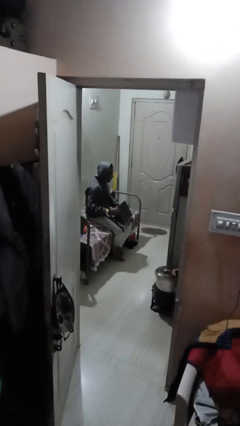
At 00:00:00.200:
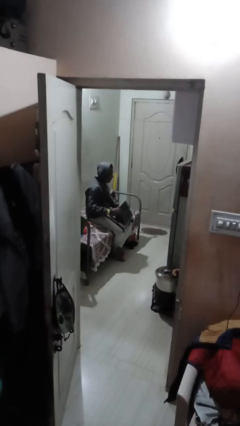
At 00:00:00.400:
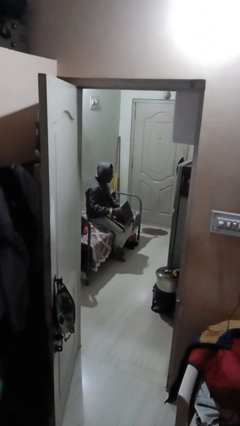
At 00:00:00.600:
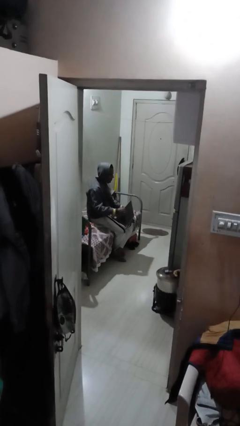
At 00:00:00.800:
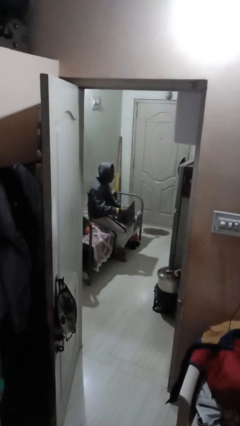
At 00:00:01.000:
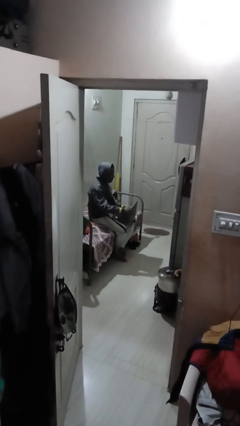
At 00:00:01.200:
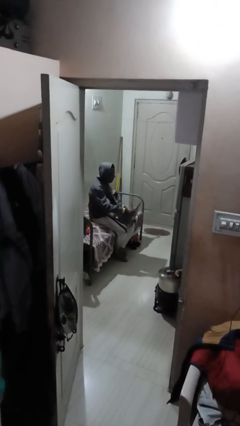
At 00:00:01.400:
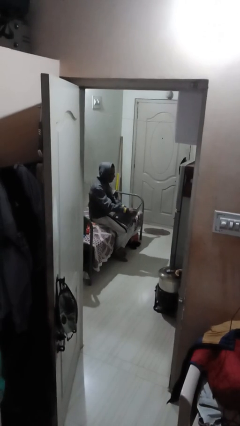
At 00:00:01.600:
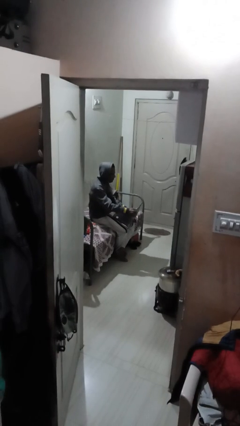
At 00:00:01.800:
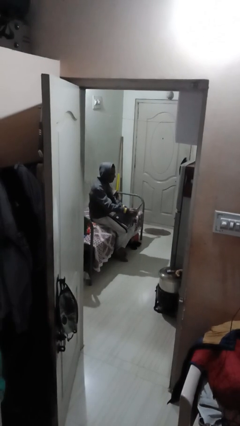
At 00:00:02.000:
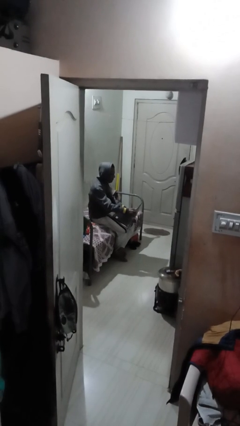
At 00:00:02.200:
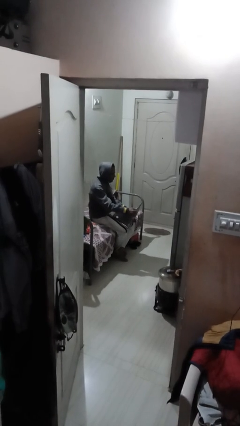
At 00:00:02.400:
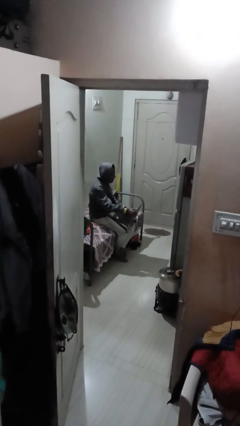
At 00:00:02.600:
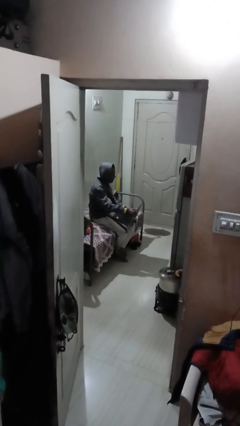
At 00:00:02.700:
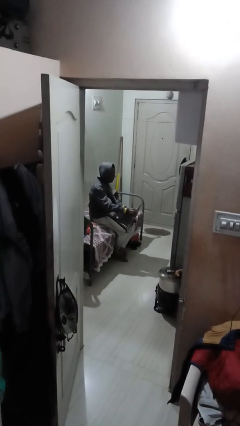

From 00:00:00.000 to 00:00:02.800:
person interacts with laptop

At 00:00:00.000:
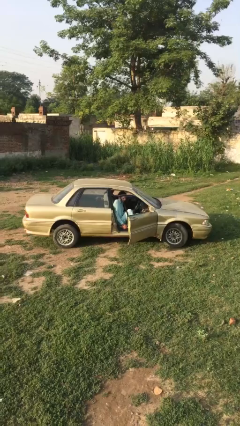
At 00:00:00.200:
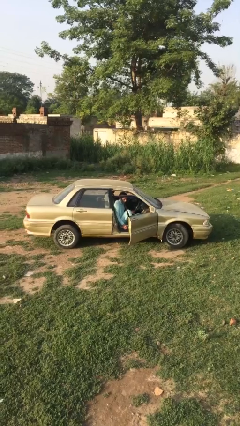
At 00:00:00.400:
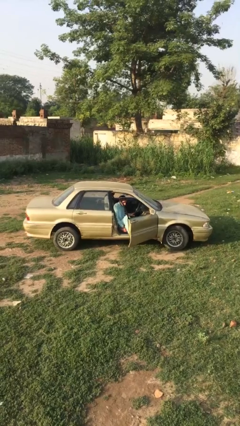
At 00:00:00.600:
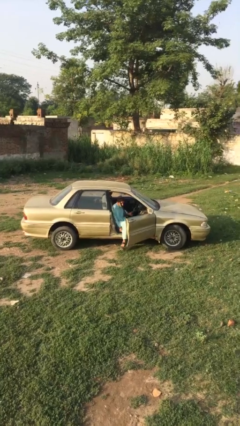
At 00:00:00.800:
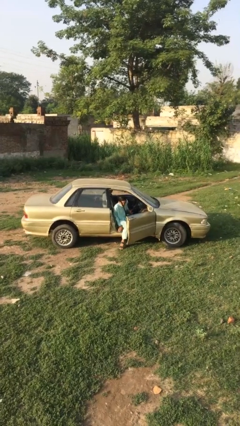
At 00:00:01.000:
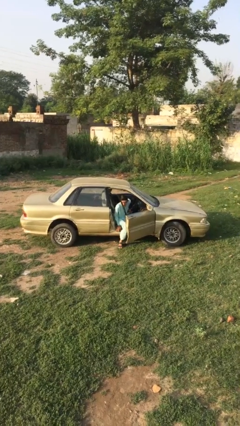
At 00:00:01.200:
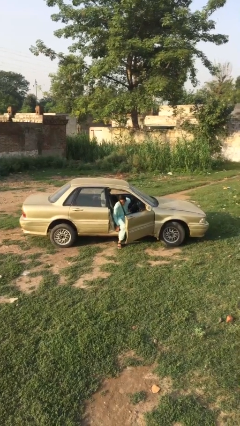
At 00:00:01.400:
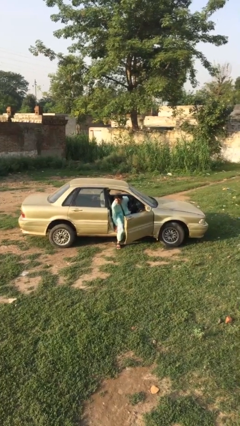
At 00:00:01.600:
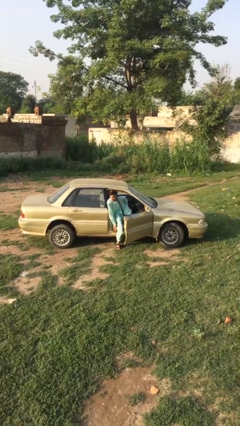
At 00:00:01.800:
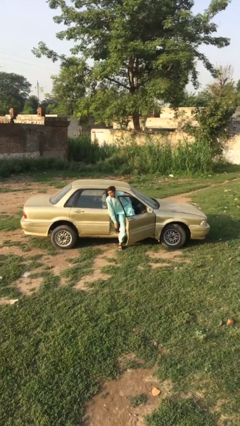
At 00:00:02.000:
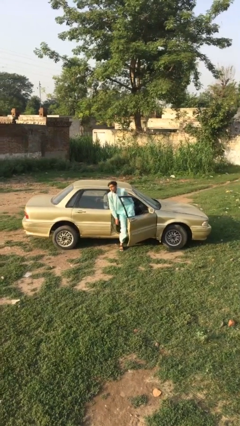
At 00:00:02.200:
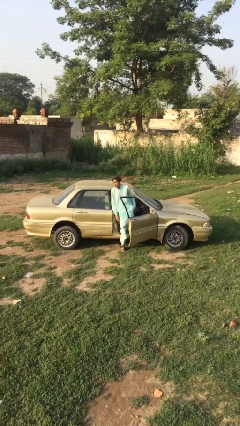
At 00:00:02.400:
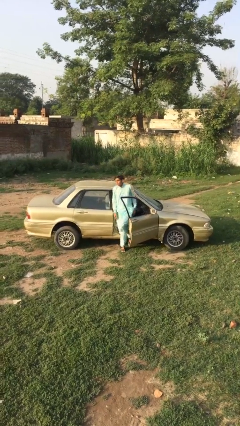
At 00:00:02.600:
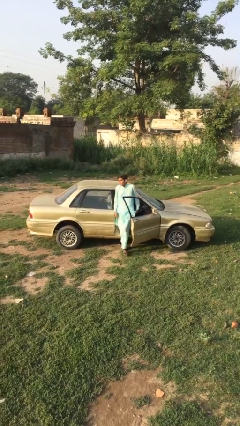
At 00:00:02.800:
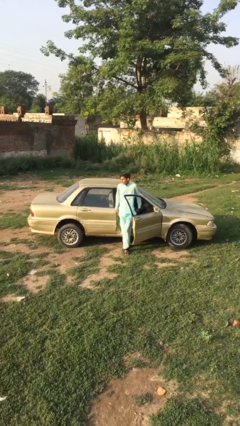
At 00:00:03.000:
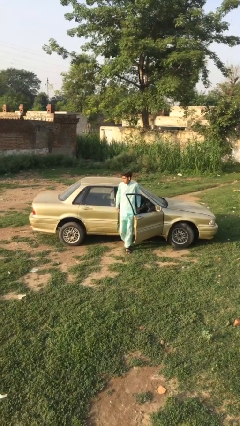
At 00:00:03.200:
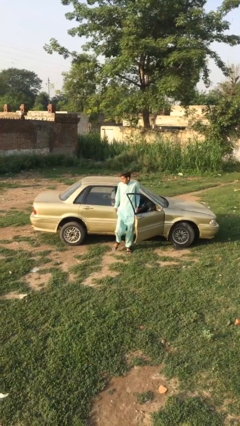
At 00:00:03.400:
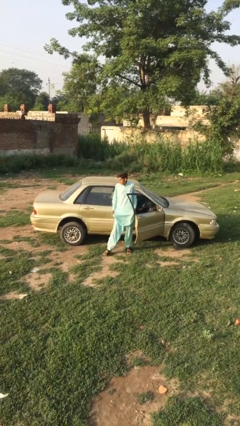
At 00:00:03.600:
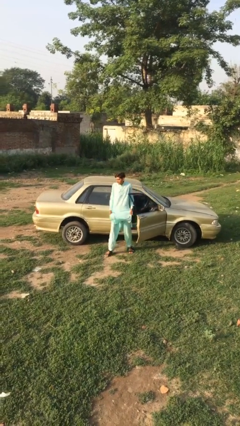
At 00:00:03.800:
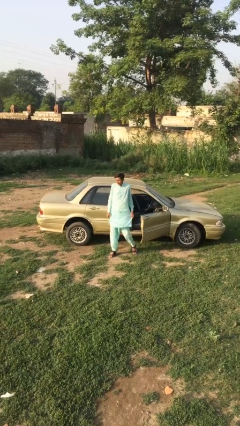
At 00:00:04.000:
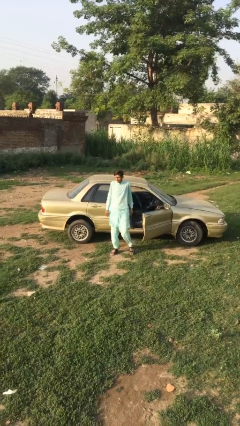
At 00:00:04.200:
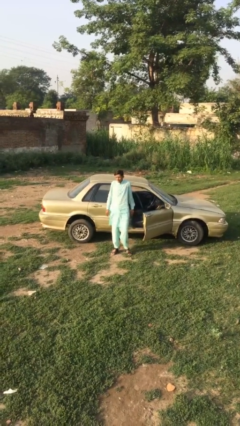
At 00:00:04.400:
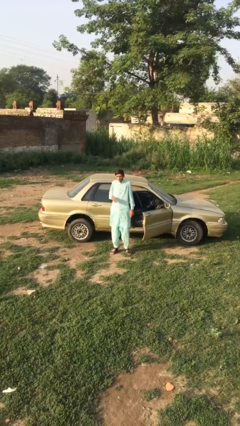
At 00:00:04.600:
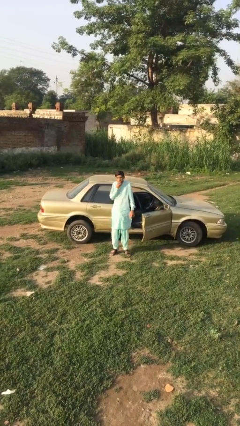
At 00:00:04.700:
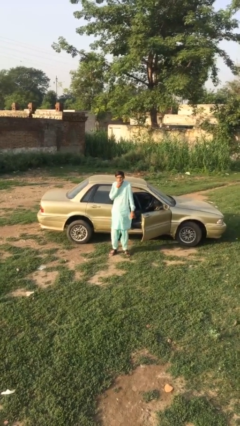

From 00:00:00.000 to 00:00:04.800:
person exits car

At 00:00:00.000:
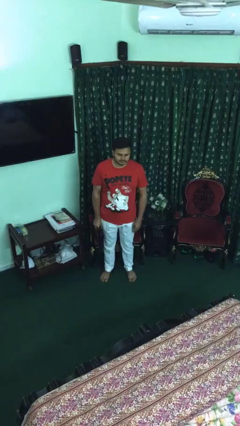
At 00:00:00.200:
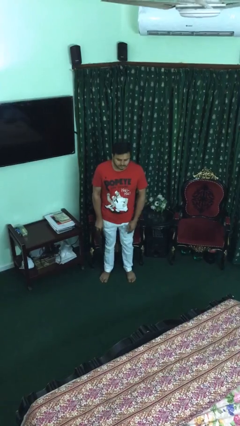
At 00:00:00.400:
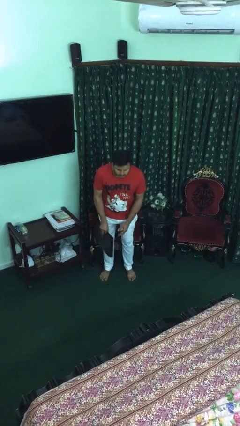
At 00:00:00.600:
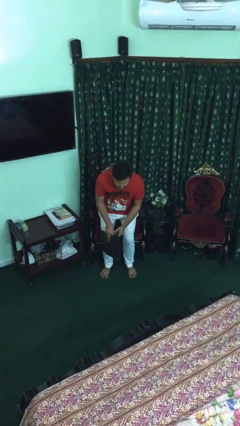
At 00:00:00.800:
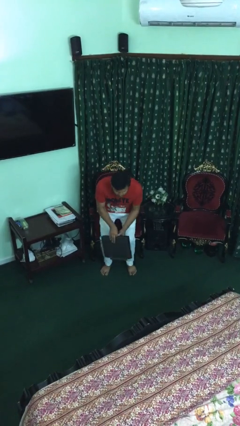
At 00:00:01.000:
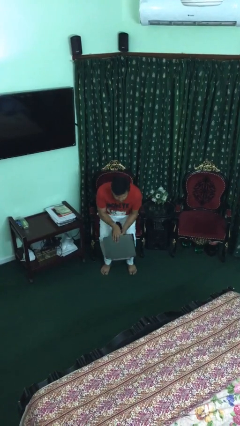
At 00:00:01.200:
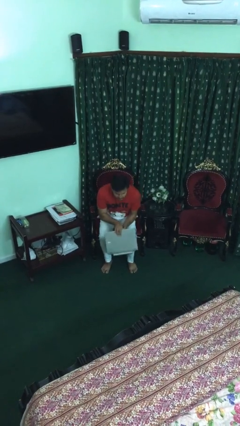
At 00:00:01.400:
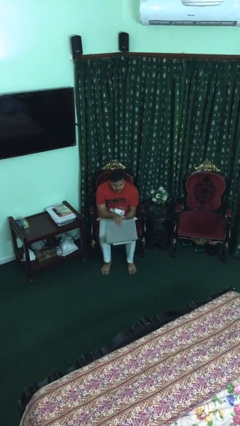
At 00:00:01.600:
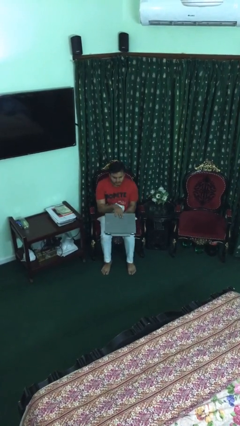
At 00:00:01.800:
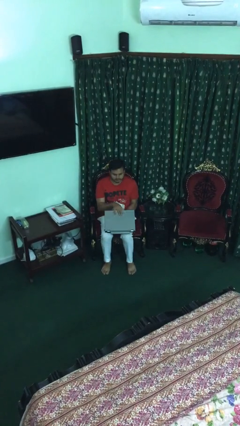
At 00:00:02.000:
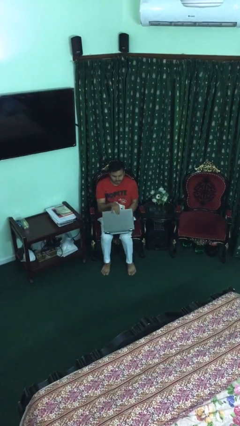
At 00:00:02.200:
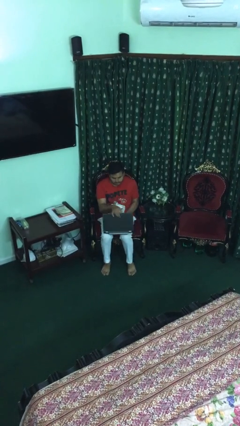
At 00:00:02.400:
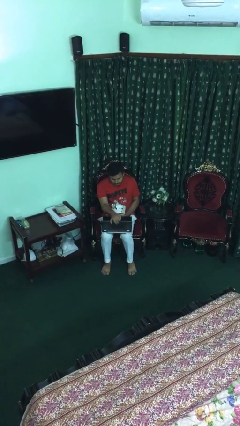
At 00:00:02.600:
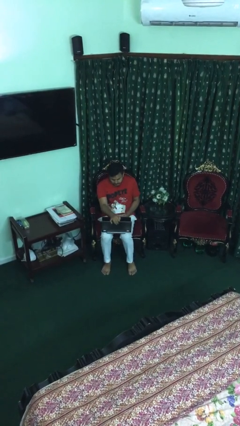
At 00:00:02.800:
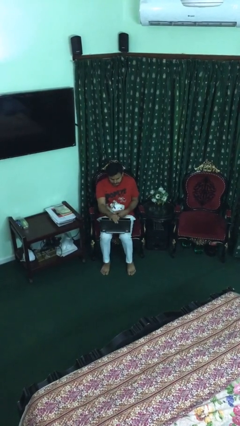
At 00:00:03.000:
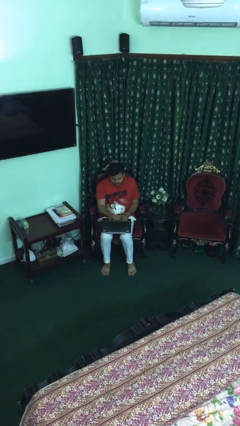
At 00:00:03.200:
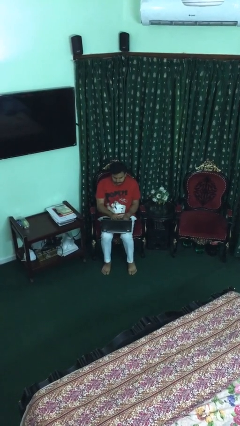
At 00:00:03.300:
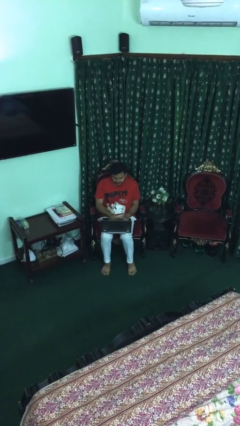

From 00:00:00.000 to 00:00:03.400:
person sits down

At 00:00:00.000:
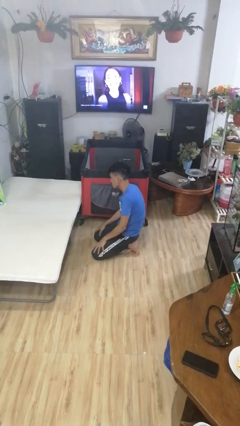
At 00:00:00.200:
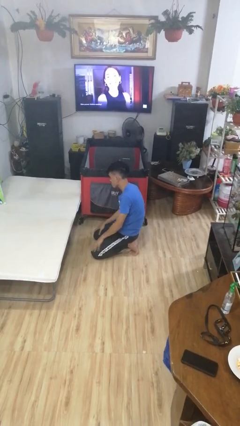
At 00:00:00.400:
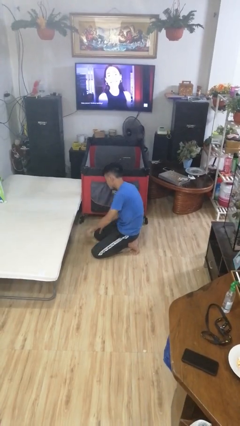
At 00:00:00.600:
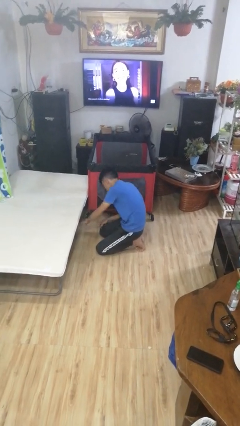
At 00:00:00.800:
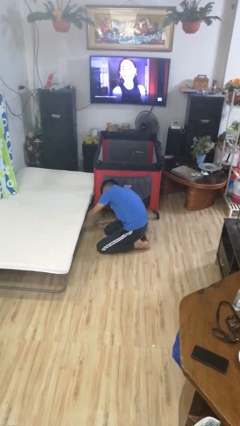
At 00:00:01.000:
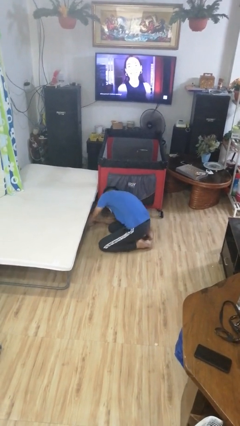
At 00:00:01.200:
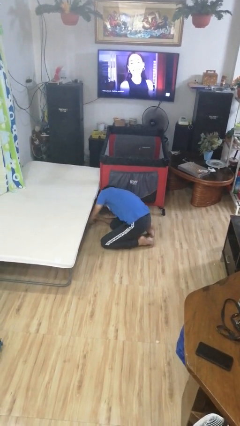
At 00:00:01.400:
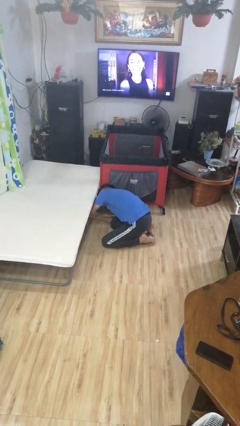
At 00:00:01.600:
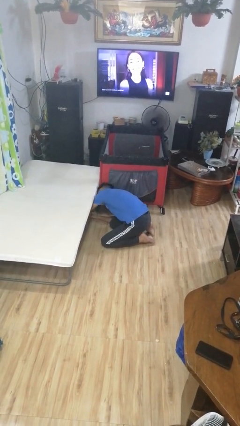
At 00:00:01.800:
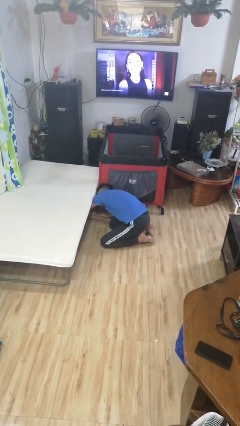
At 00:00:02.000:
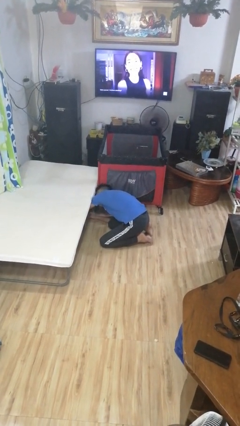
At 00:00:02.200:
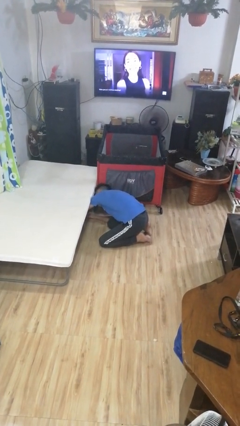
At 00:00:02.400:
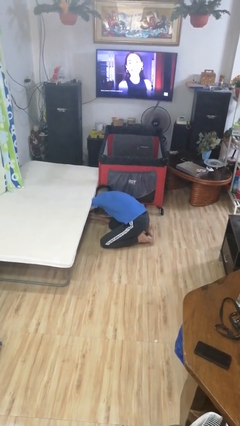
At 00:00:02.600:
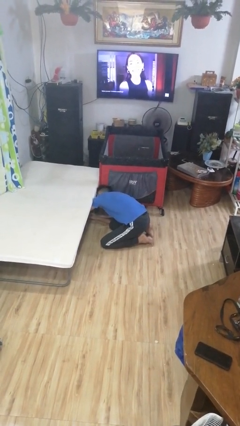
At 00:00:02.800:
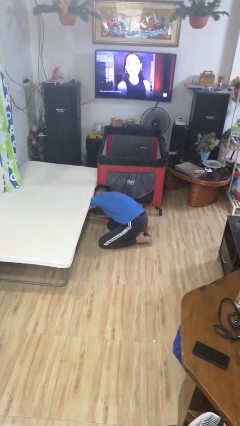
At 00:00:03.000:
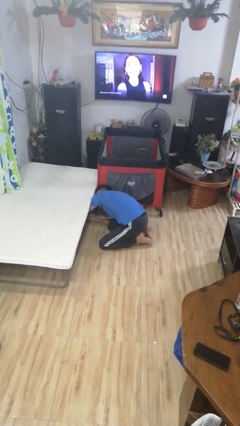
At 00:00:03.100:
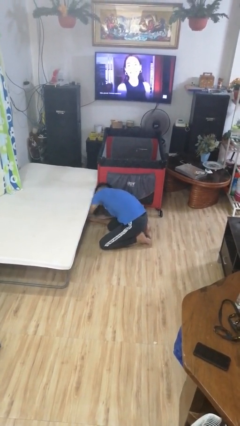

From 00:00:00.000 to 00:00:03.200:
person searches under bed

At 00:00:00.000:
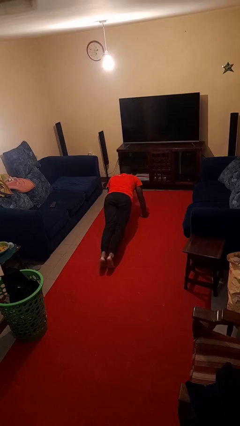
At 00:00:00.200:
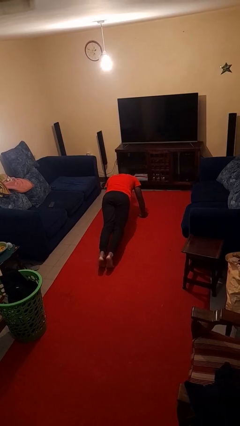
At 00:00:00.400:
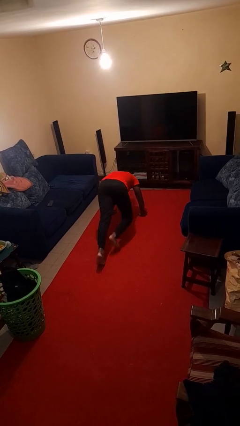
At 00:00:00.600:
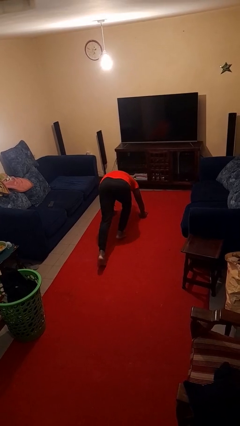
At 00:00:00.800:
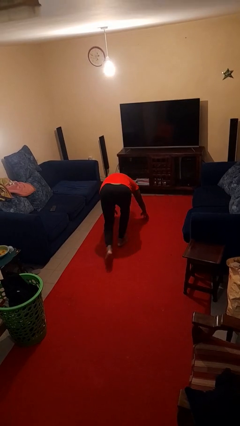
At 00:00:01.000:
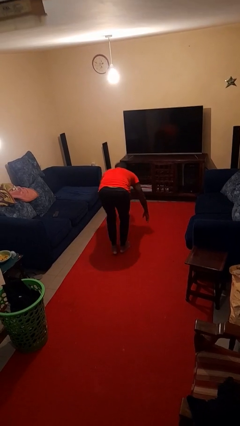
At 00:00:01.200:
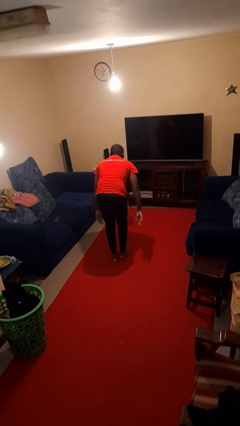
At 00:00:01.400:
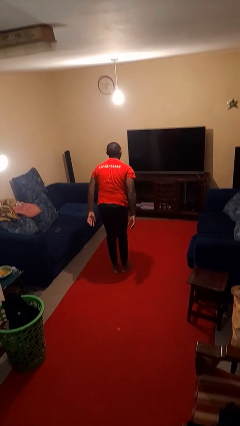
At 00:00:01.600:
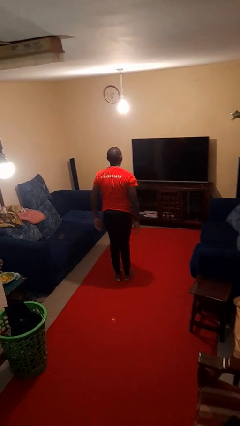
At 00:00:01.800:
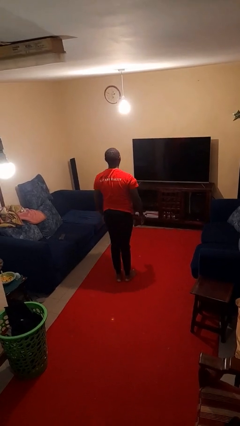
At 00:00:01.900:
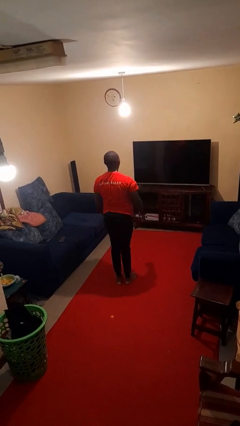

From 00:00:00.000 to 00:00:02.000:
person stands up from floor

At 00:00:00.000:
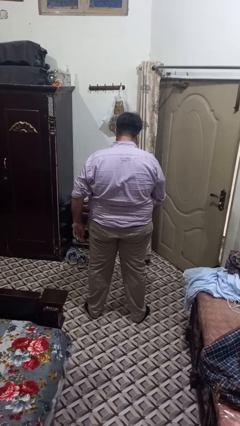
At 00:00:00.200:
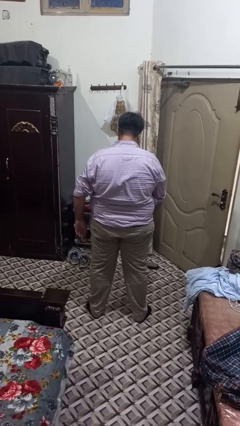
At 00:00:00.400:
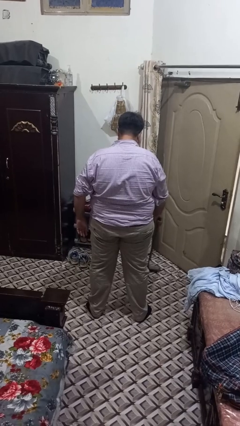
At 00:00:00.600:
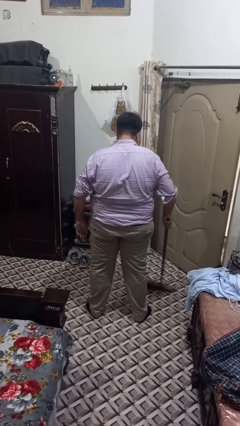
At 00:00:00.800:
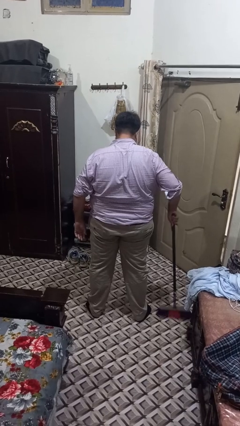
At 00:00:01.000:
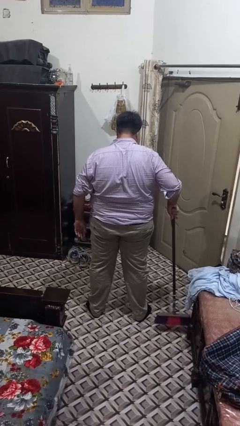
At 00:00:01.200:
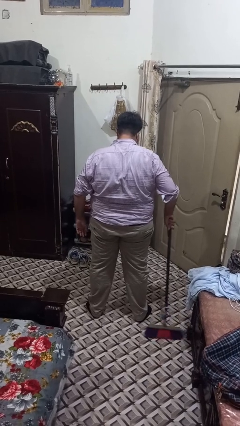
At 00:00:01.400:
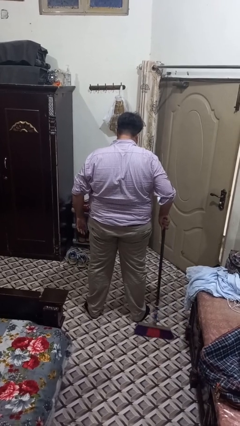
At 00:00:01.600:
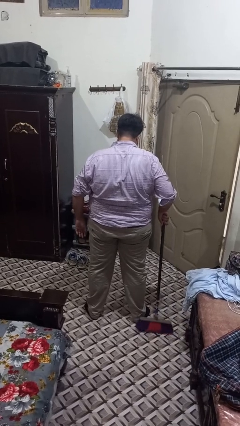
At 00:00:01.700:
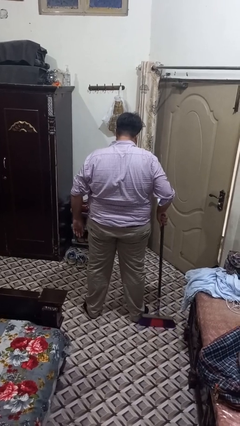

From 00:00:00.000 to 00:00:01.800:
person sweeps floor
